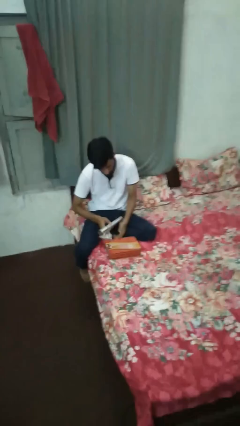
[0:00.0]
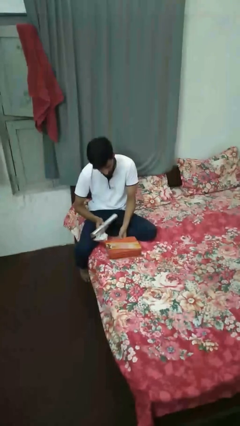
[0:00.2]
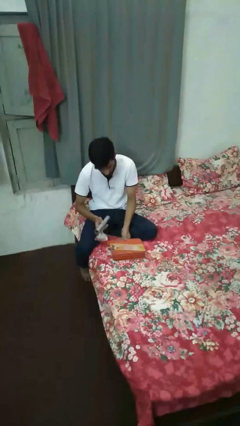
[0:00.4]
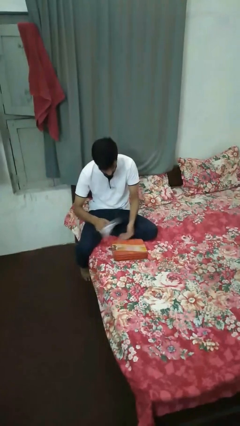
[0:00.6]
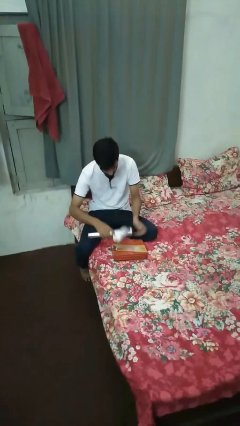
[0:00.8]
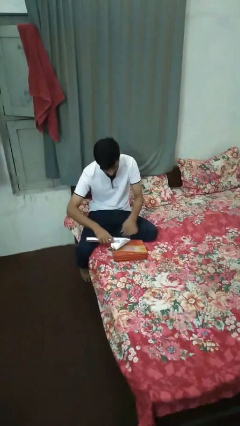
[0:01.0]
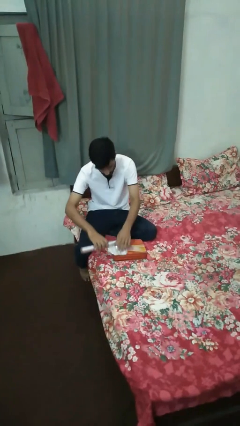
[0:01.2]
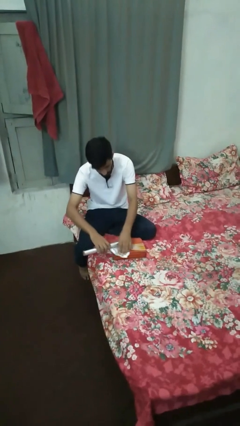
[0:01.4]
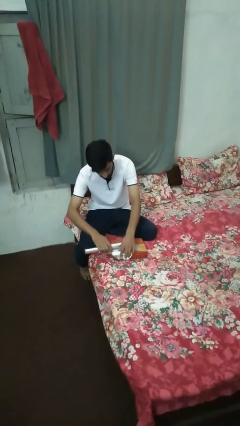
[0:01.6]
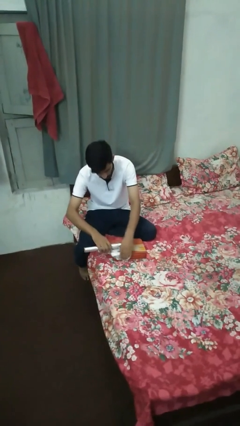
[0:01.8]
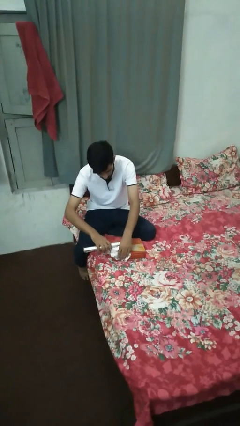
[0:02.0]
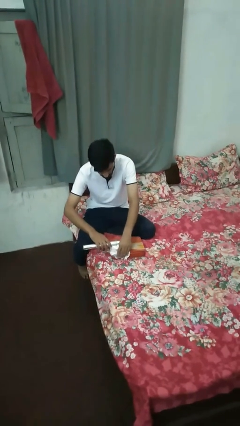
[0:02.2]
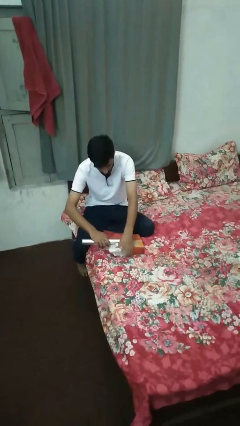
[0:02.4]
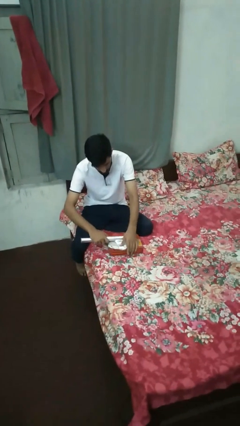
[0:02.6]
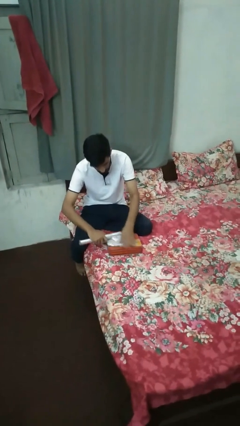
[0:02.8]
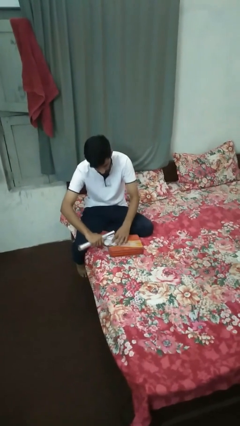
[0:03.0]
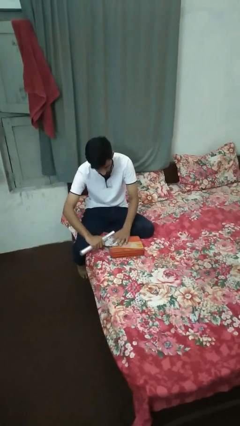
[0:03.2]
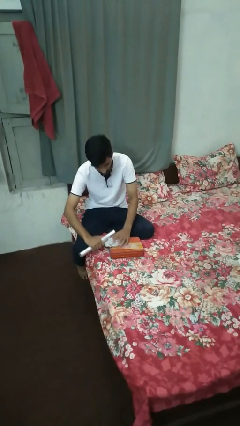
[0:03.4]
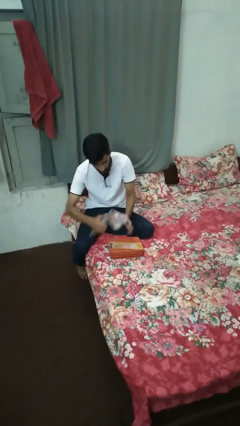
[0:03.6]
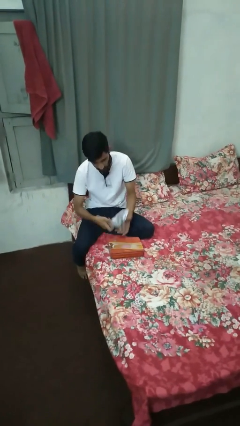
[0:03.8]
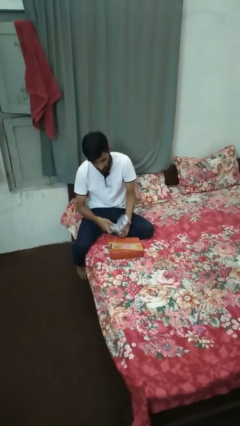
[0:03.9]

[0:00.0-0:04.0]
person wraps box

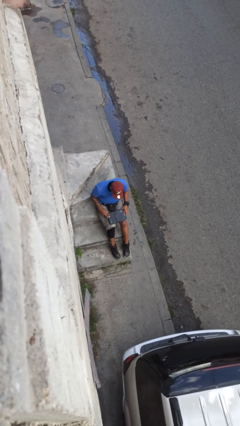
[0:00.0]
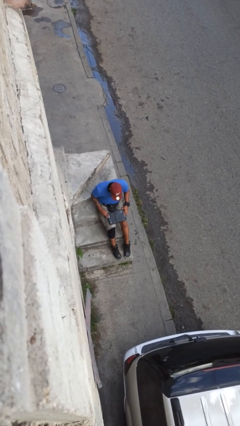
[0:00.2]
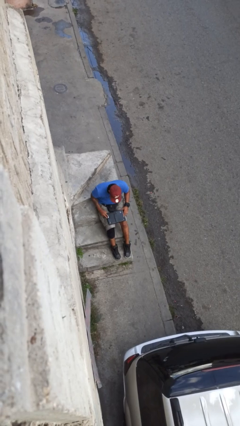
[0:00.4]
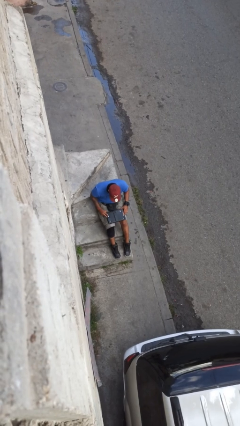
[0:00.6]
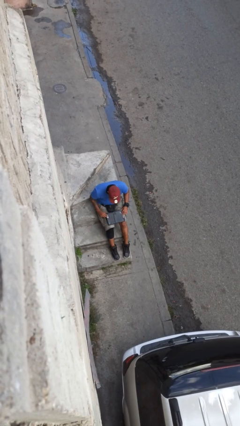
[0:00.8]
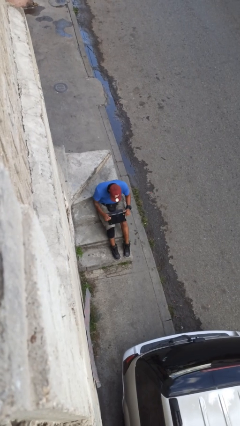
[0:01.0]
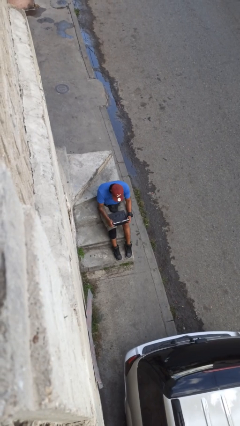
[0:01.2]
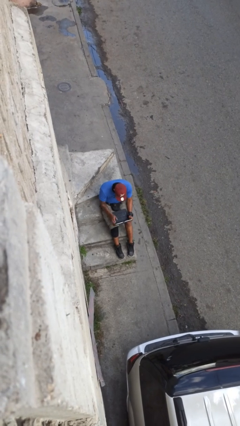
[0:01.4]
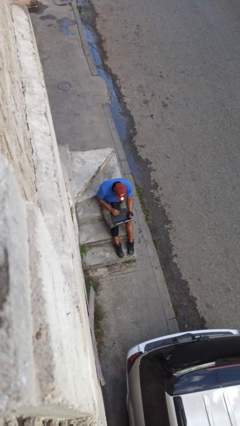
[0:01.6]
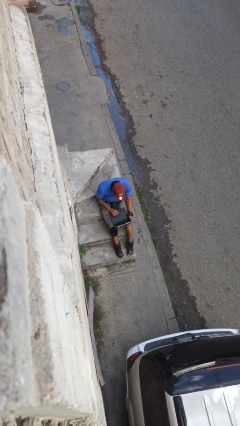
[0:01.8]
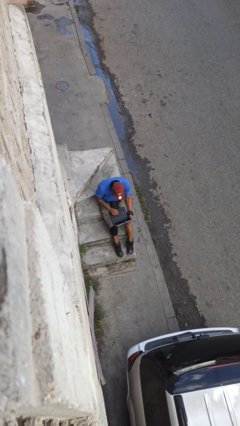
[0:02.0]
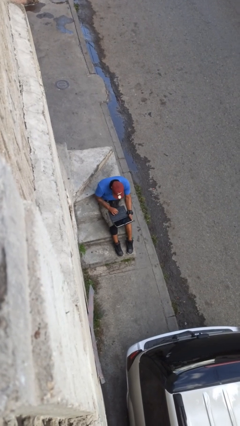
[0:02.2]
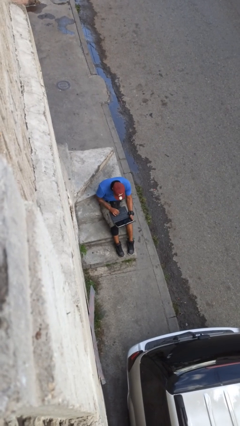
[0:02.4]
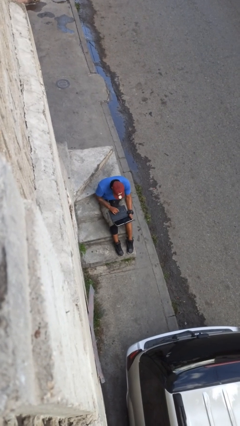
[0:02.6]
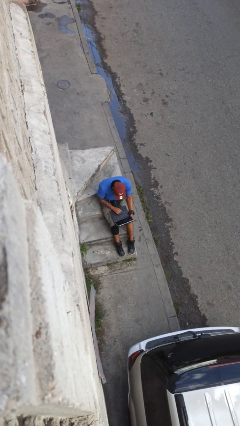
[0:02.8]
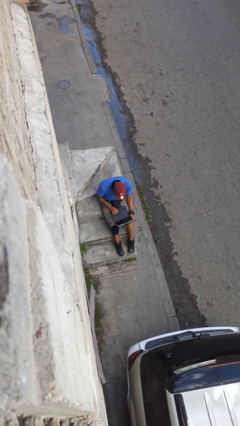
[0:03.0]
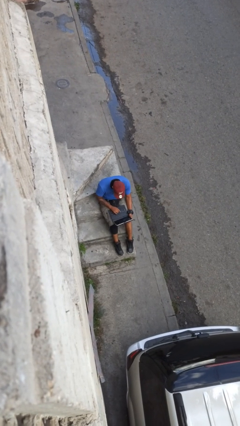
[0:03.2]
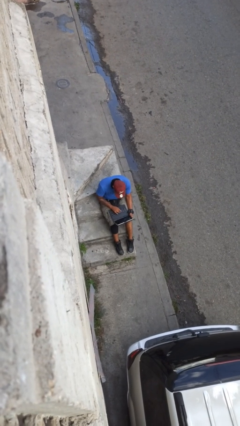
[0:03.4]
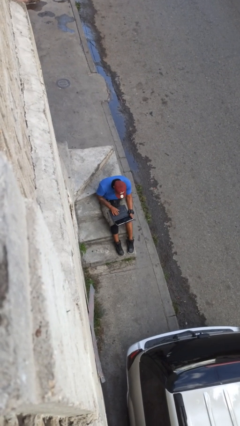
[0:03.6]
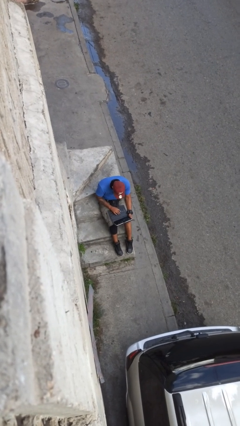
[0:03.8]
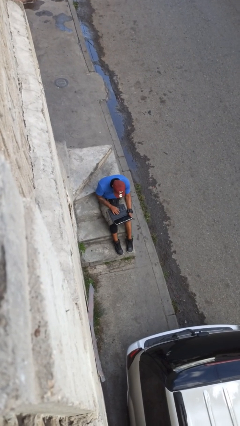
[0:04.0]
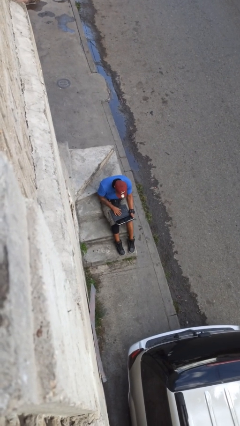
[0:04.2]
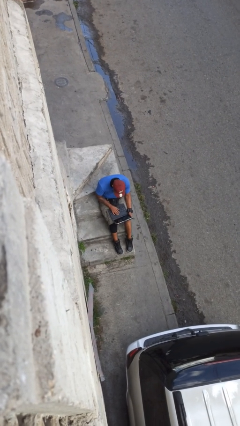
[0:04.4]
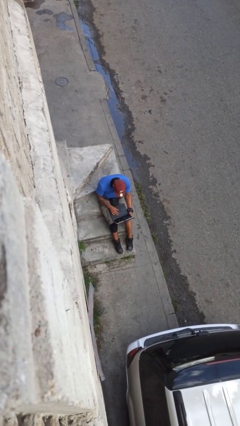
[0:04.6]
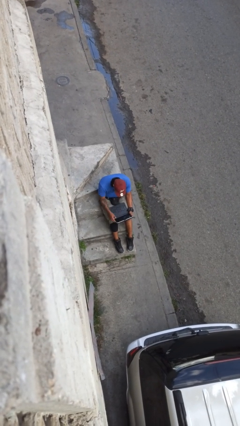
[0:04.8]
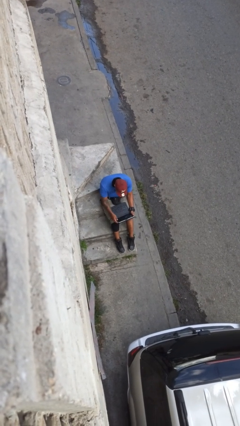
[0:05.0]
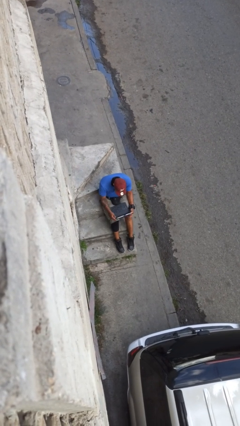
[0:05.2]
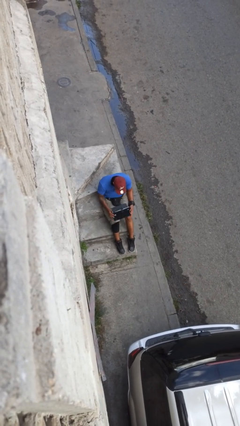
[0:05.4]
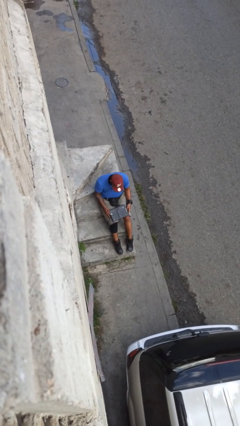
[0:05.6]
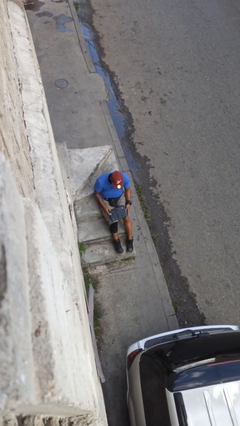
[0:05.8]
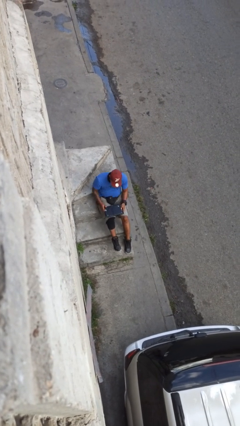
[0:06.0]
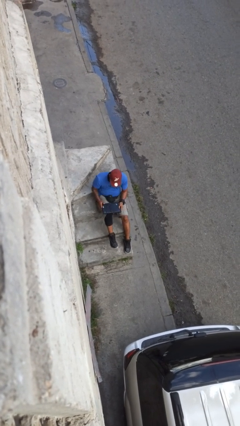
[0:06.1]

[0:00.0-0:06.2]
person interacts with laptop

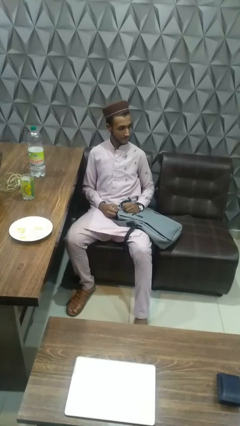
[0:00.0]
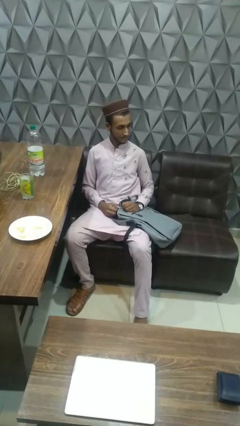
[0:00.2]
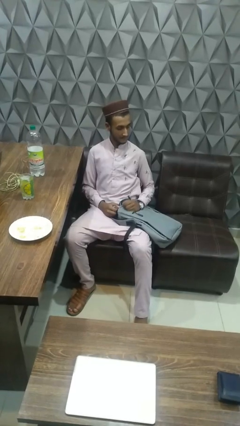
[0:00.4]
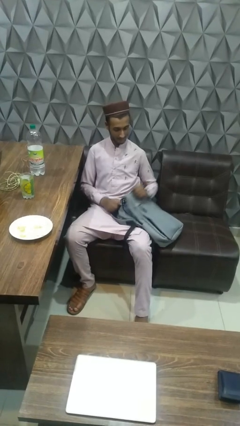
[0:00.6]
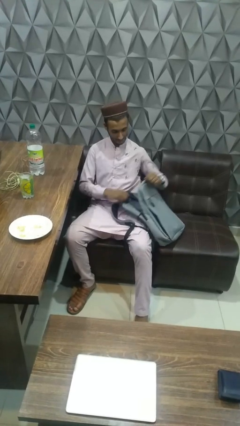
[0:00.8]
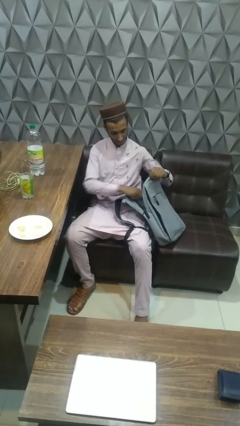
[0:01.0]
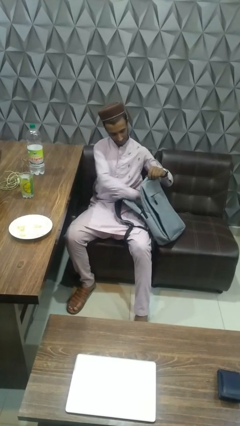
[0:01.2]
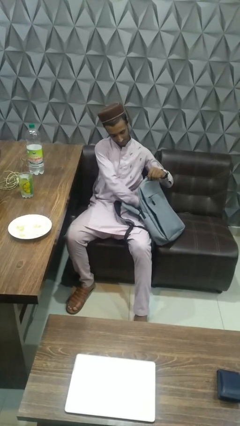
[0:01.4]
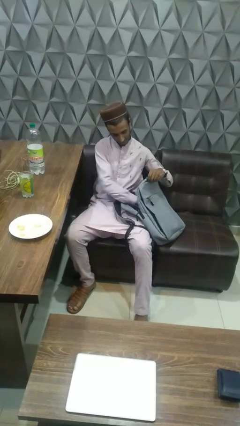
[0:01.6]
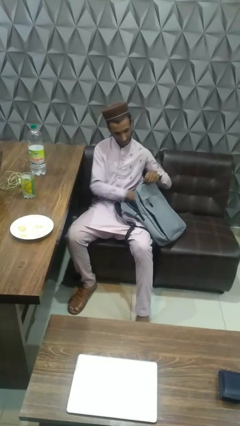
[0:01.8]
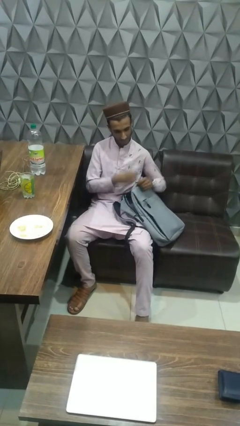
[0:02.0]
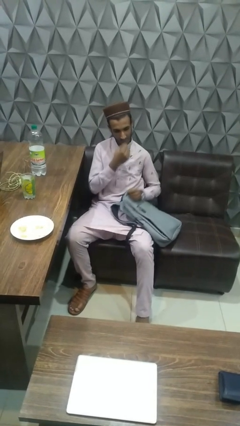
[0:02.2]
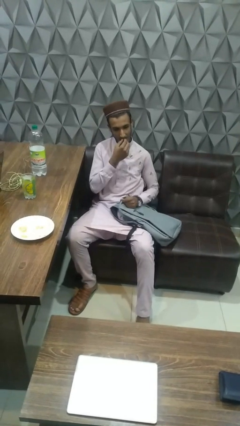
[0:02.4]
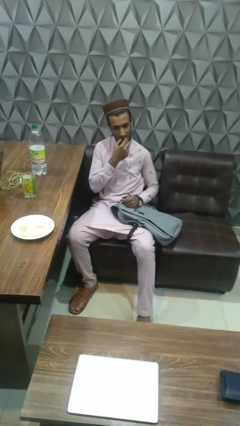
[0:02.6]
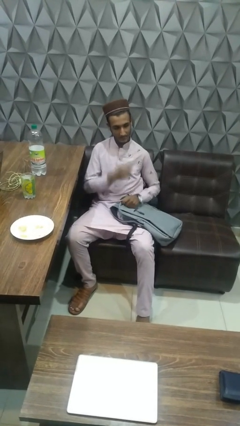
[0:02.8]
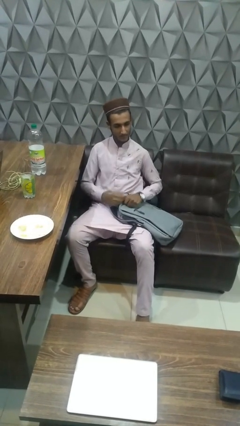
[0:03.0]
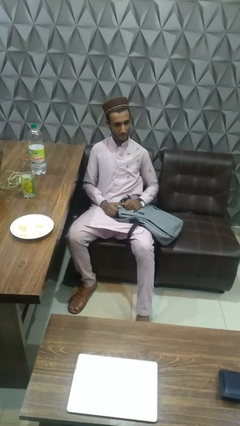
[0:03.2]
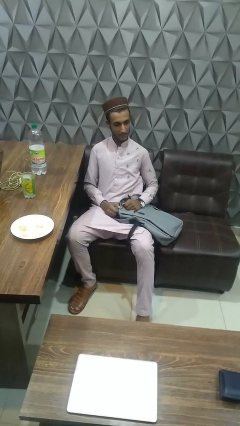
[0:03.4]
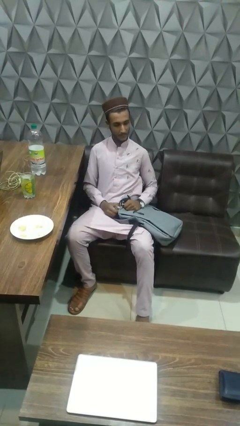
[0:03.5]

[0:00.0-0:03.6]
person eats snack from bag

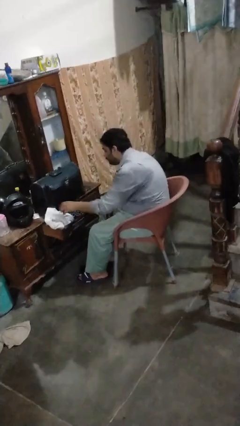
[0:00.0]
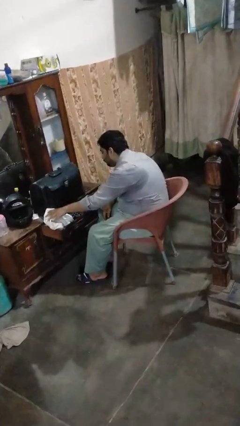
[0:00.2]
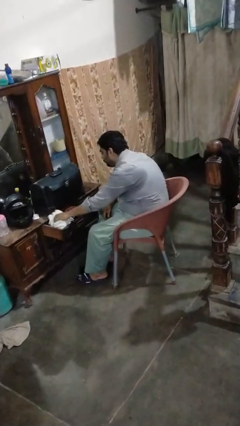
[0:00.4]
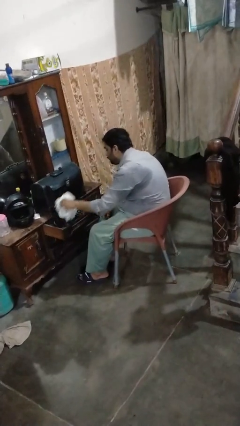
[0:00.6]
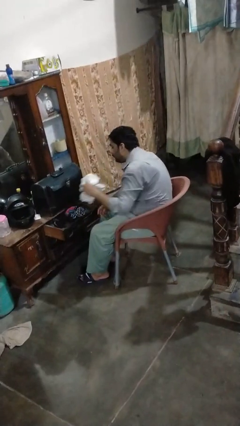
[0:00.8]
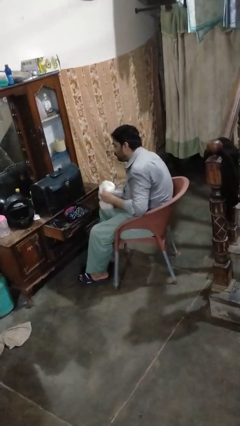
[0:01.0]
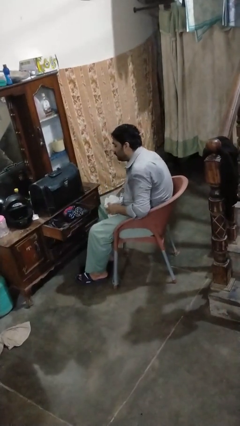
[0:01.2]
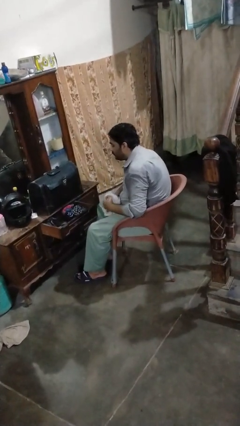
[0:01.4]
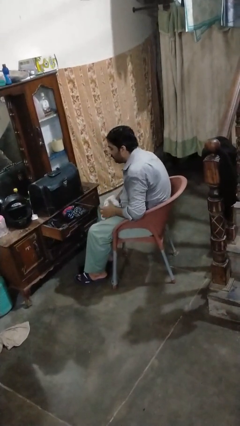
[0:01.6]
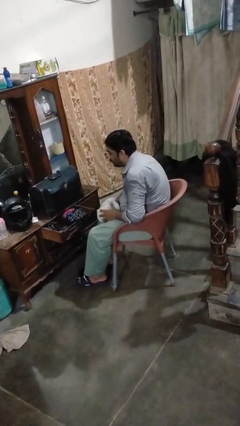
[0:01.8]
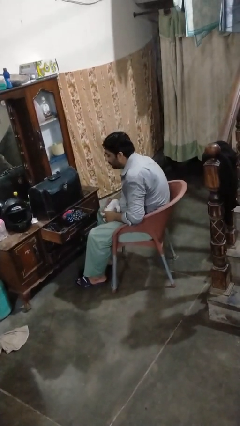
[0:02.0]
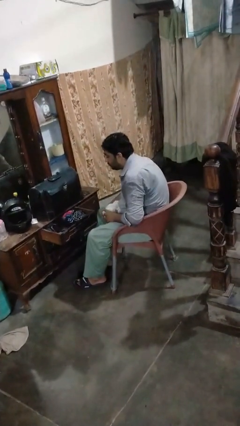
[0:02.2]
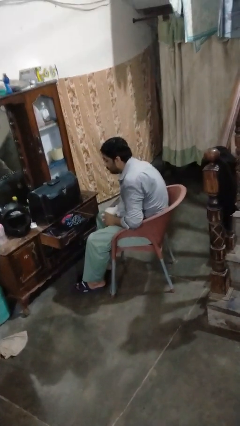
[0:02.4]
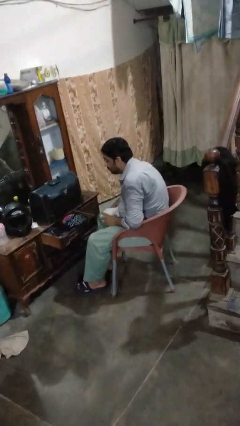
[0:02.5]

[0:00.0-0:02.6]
person takes clothes from dresser

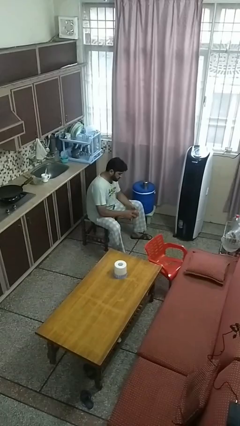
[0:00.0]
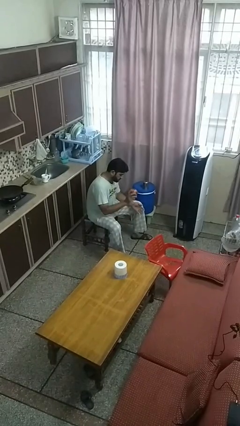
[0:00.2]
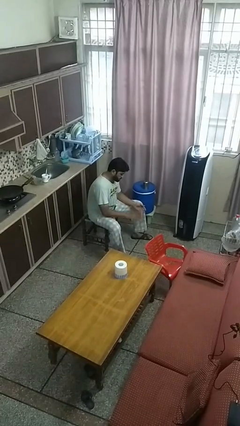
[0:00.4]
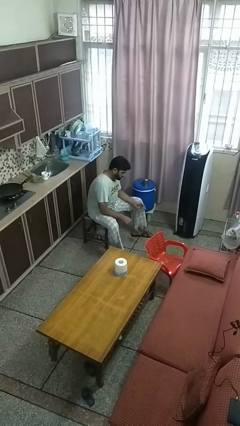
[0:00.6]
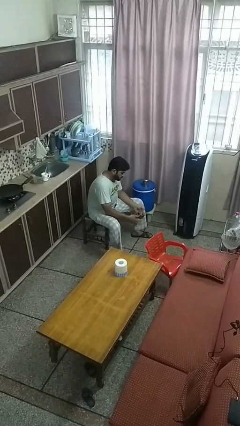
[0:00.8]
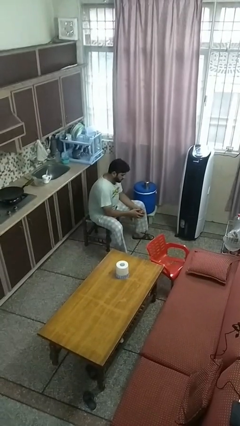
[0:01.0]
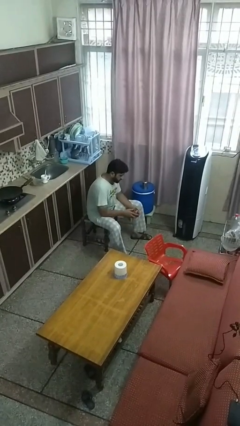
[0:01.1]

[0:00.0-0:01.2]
person bounces ball on floor

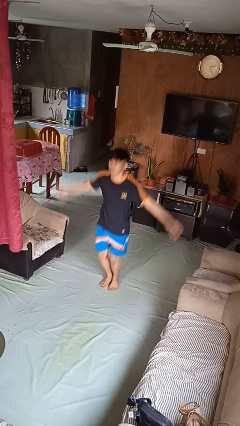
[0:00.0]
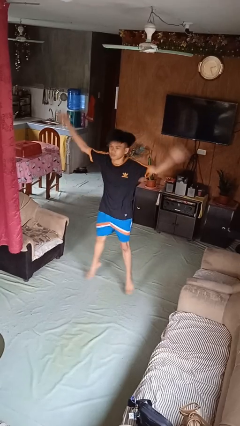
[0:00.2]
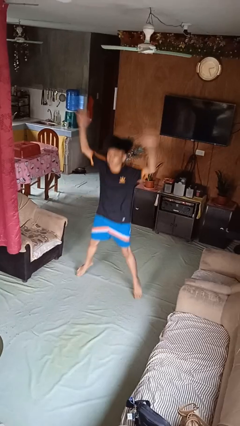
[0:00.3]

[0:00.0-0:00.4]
person exercises with jumping jacks
